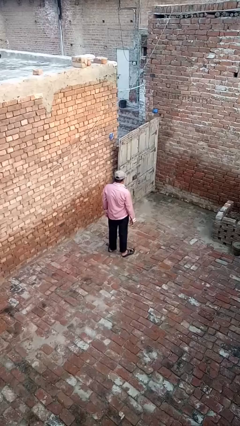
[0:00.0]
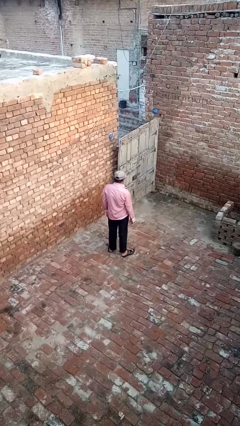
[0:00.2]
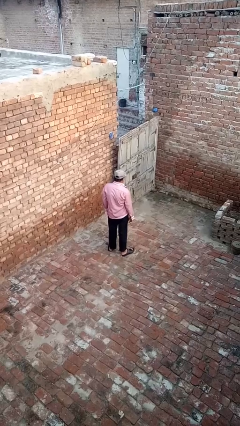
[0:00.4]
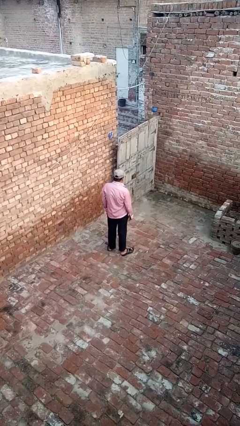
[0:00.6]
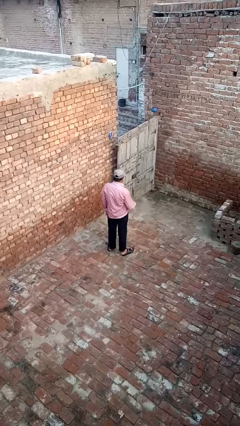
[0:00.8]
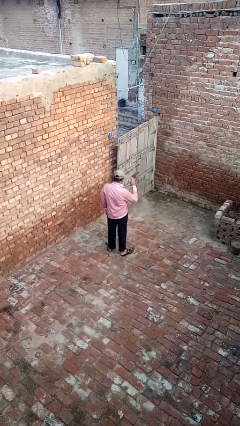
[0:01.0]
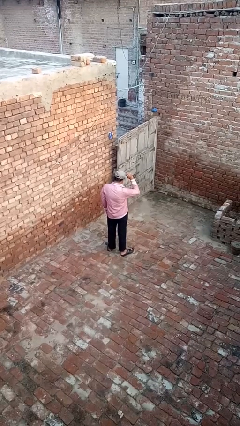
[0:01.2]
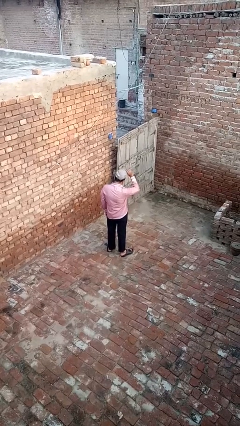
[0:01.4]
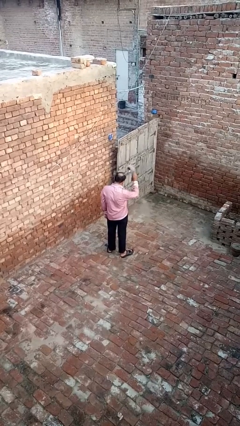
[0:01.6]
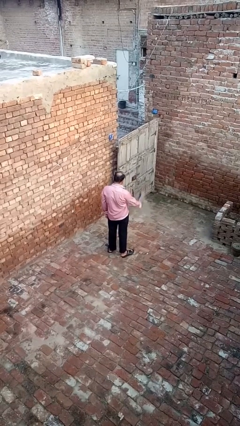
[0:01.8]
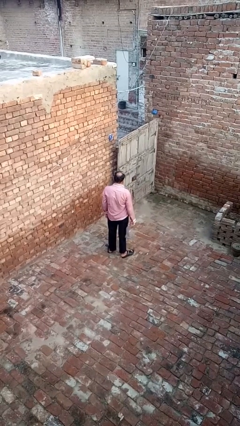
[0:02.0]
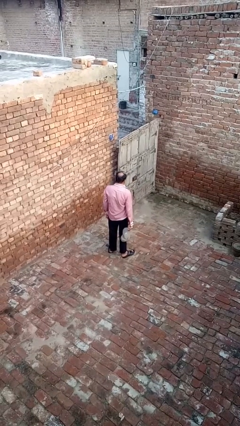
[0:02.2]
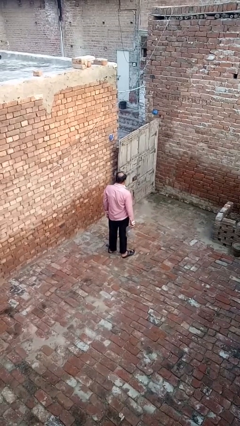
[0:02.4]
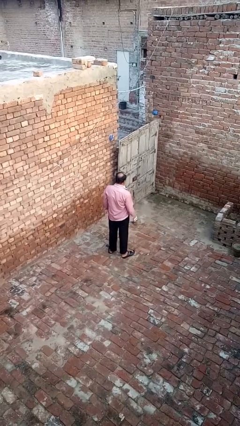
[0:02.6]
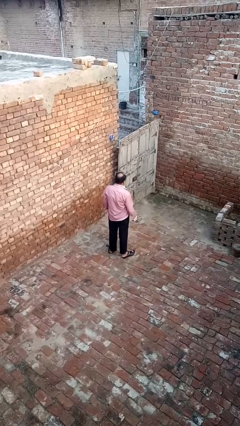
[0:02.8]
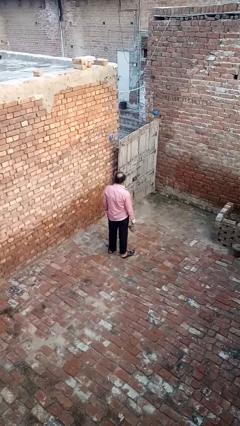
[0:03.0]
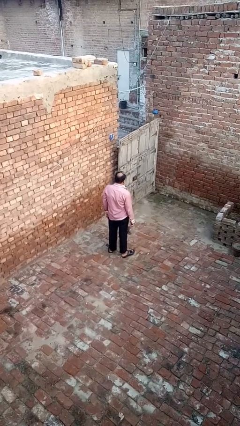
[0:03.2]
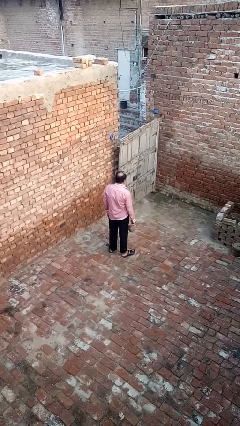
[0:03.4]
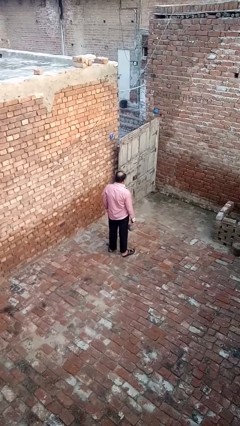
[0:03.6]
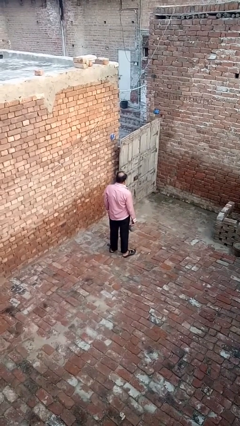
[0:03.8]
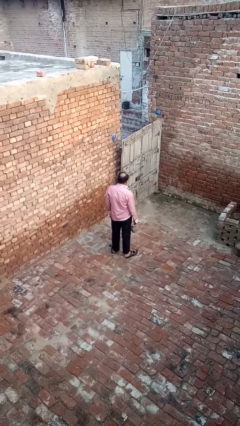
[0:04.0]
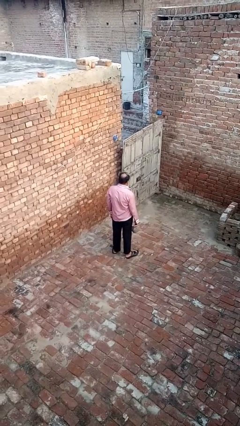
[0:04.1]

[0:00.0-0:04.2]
person takes off hat

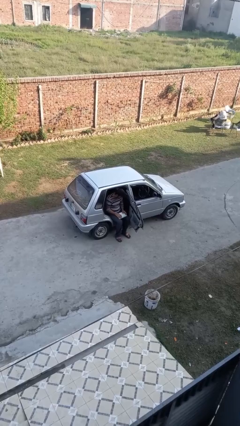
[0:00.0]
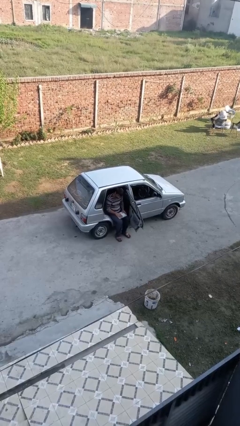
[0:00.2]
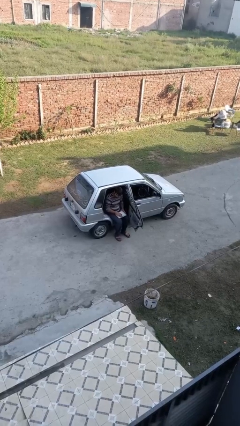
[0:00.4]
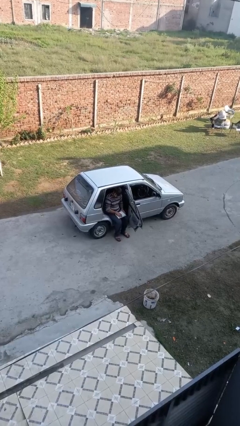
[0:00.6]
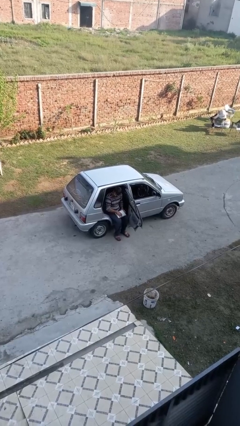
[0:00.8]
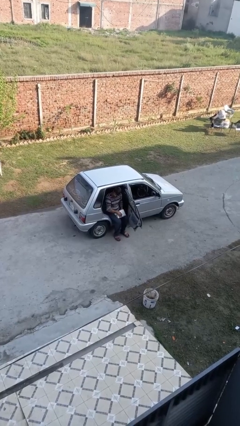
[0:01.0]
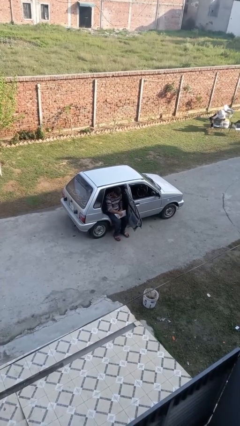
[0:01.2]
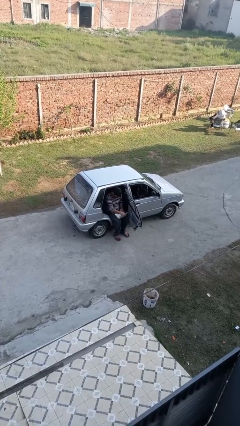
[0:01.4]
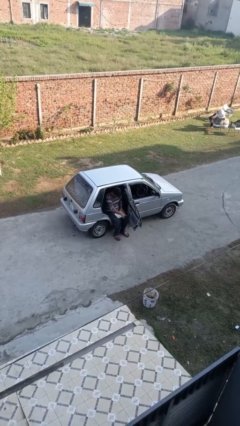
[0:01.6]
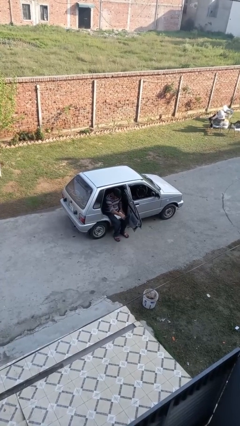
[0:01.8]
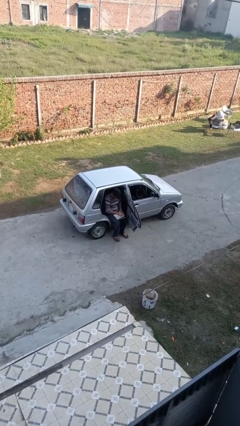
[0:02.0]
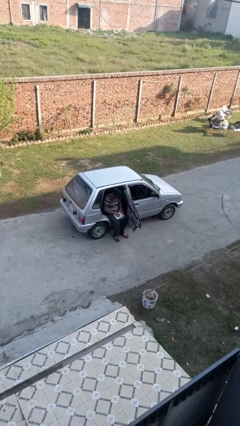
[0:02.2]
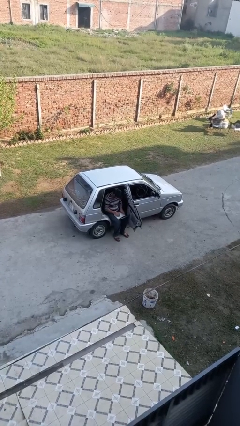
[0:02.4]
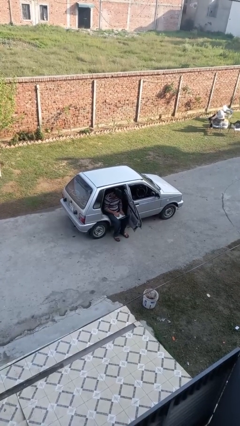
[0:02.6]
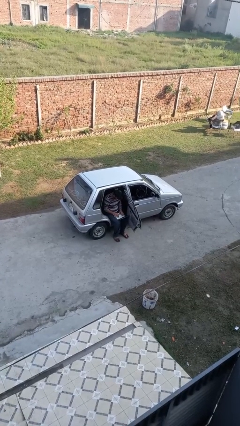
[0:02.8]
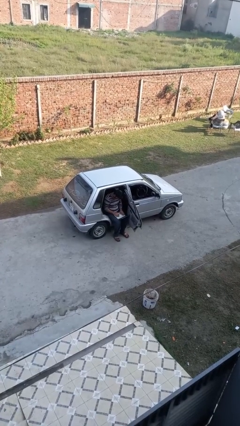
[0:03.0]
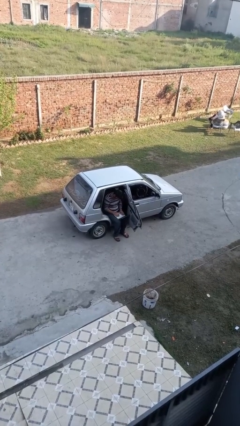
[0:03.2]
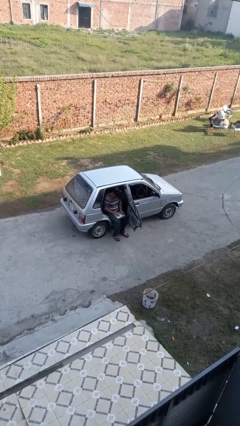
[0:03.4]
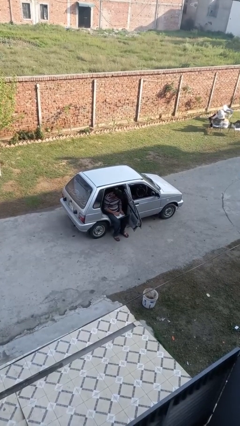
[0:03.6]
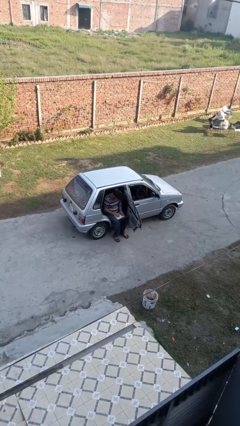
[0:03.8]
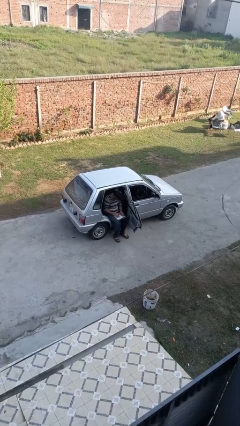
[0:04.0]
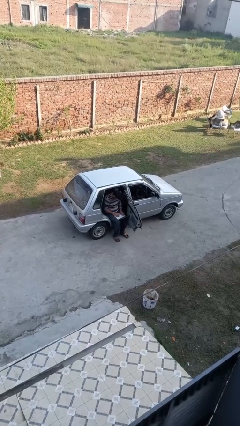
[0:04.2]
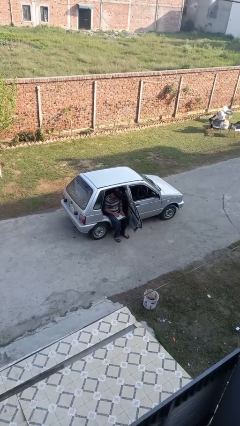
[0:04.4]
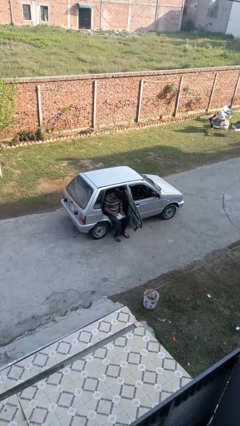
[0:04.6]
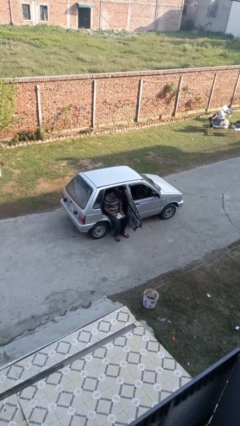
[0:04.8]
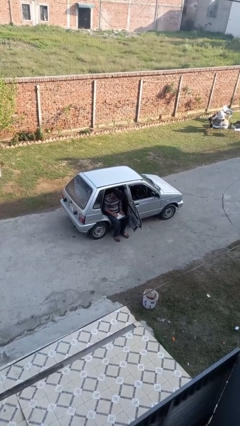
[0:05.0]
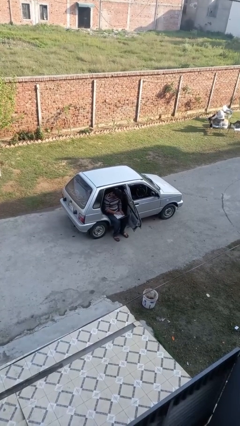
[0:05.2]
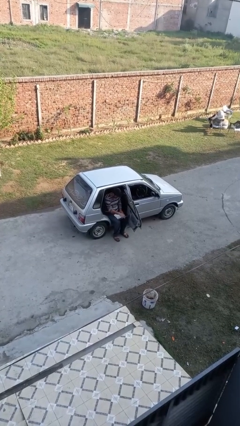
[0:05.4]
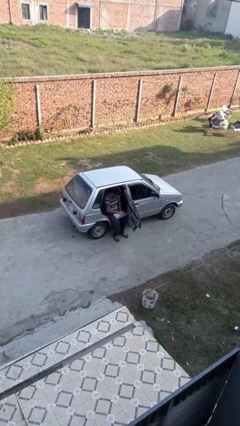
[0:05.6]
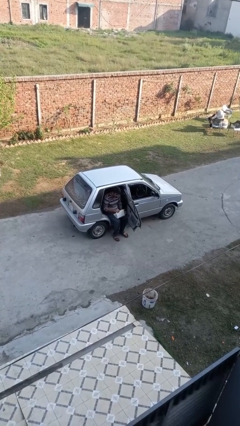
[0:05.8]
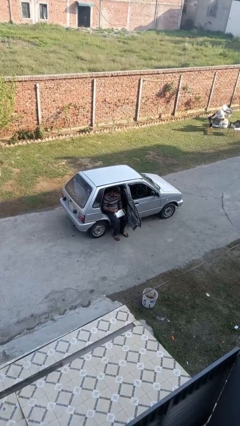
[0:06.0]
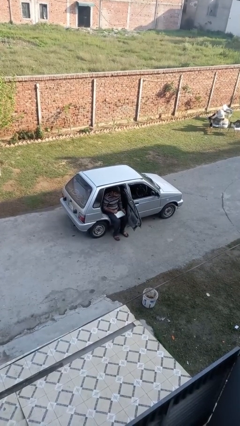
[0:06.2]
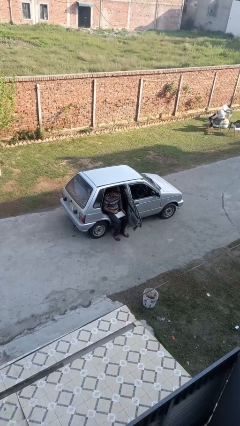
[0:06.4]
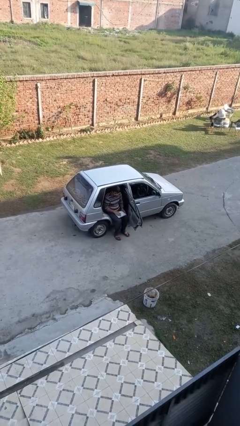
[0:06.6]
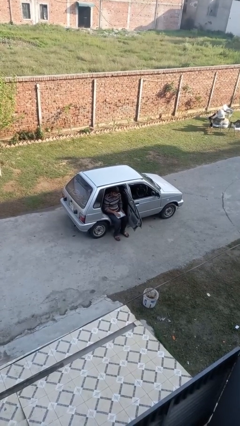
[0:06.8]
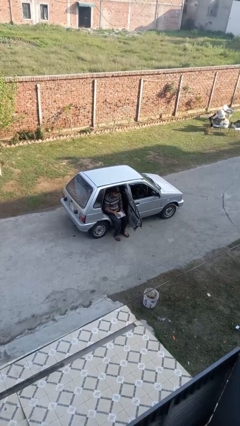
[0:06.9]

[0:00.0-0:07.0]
person interacts with laptop

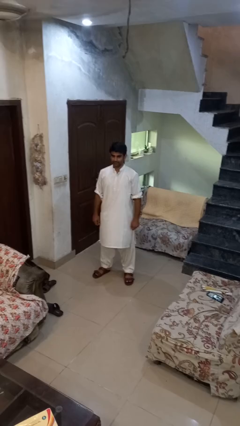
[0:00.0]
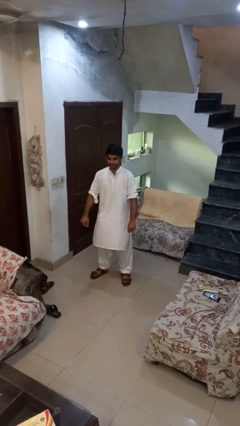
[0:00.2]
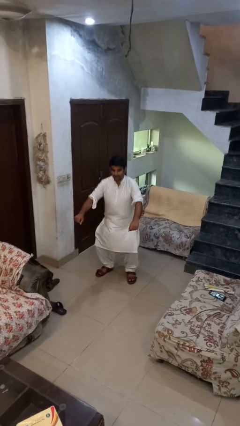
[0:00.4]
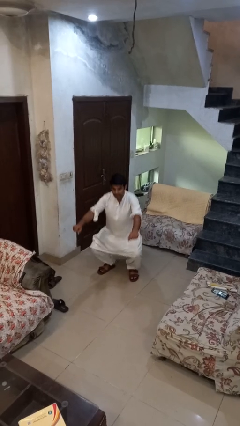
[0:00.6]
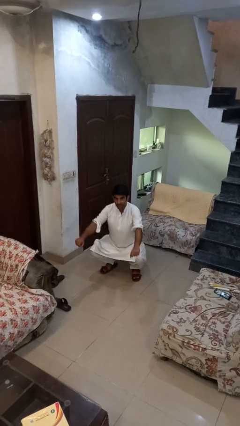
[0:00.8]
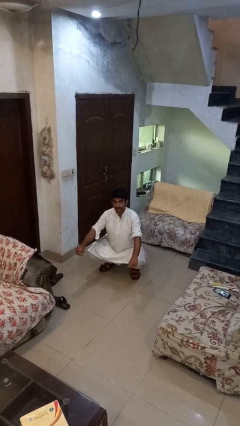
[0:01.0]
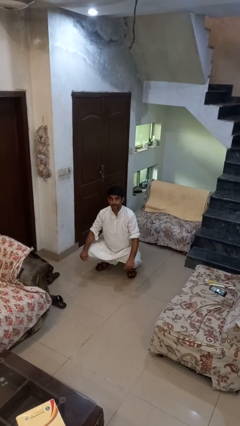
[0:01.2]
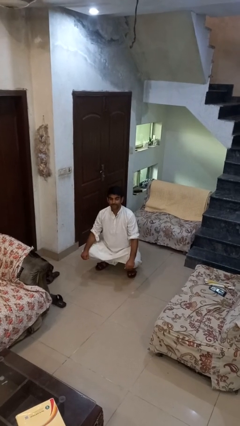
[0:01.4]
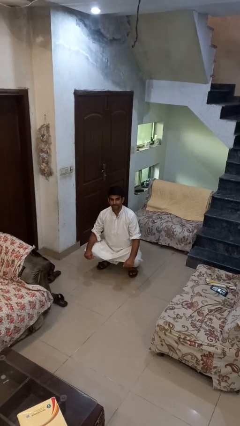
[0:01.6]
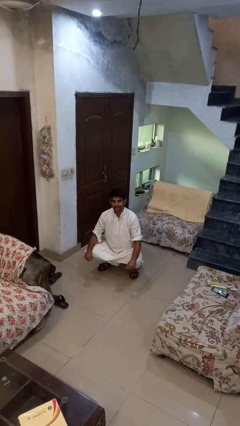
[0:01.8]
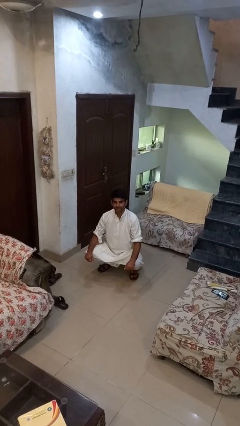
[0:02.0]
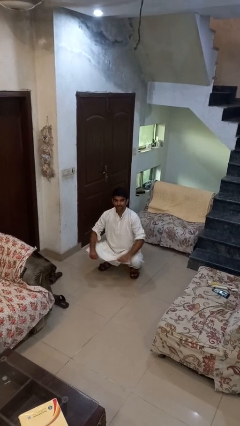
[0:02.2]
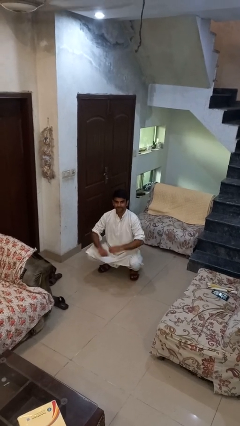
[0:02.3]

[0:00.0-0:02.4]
person squats

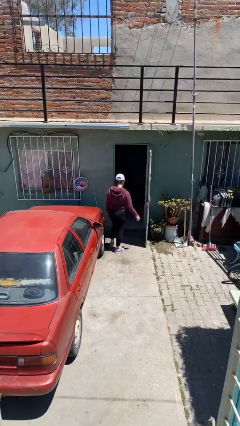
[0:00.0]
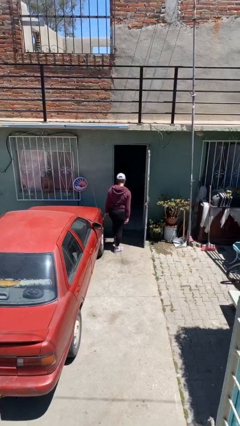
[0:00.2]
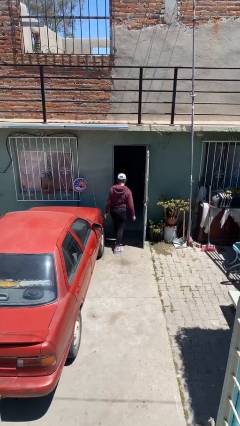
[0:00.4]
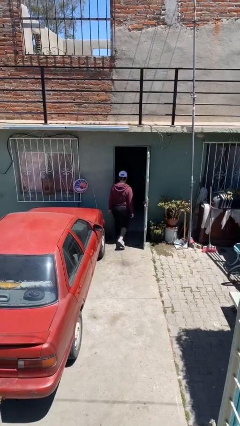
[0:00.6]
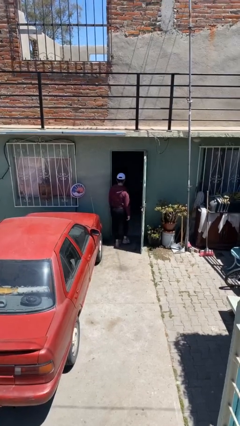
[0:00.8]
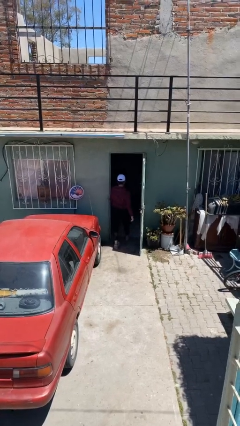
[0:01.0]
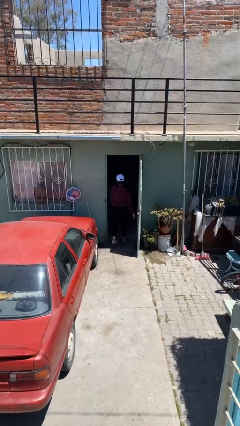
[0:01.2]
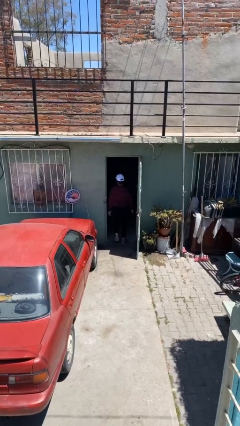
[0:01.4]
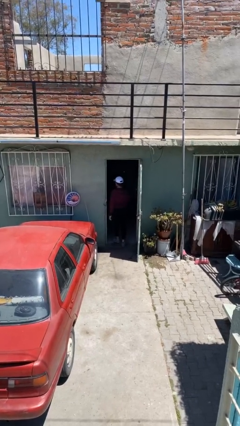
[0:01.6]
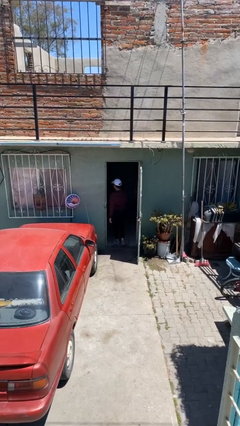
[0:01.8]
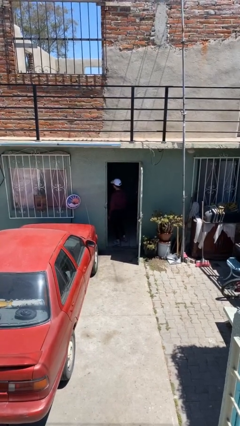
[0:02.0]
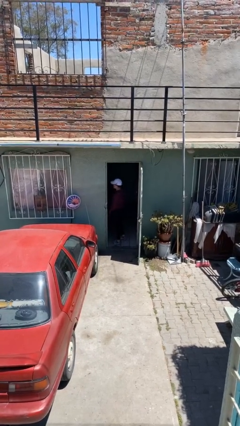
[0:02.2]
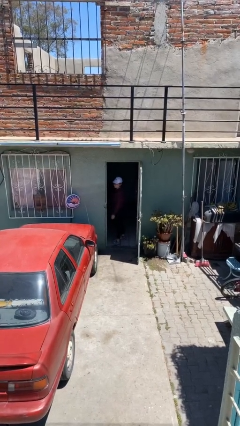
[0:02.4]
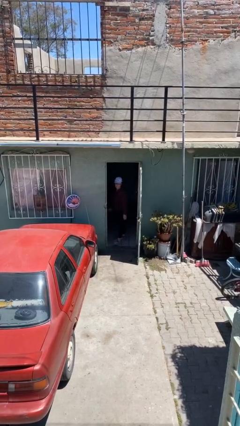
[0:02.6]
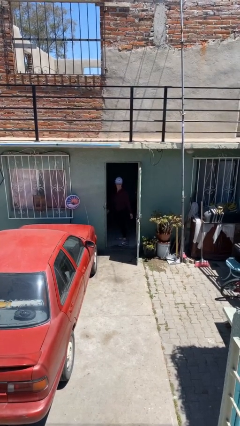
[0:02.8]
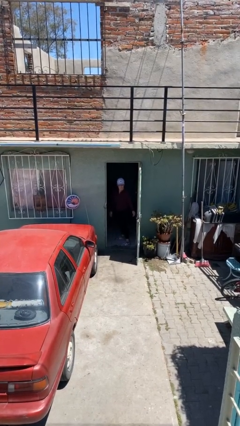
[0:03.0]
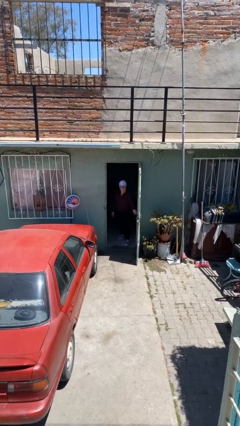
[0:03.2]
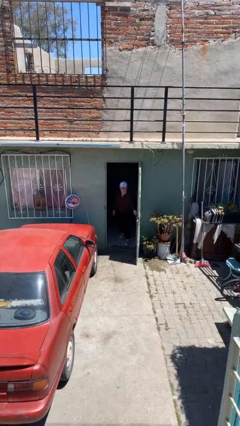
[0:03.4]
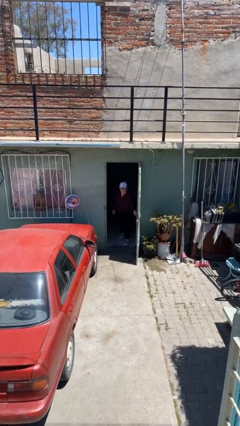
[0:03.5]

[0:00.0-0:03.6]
person exits scene through structure

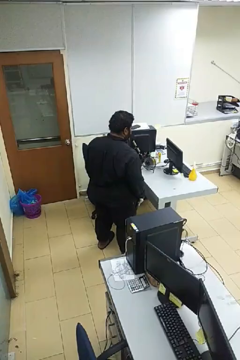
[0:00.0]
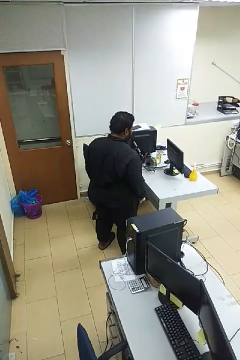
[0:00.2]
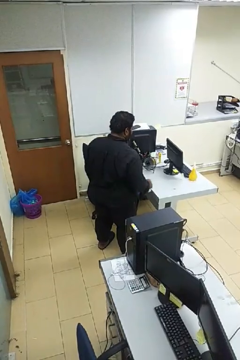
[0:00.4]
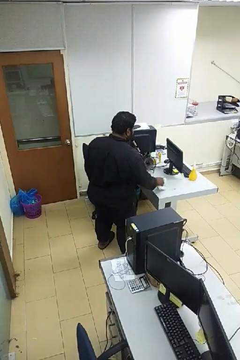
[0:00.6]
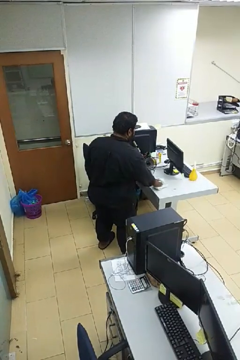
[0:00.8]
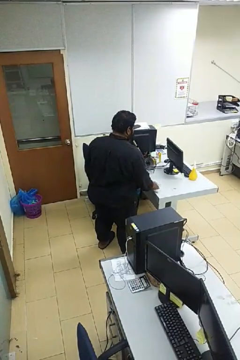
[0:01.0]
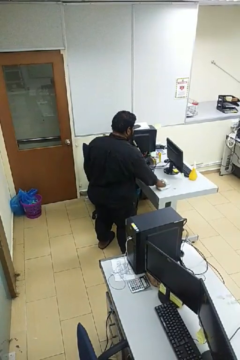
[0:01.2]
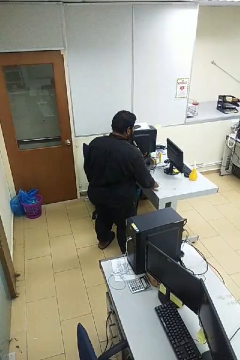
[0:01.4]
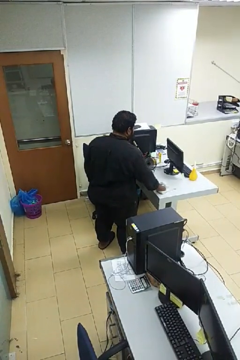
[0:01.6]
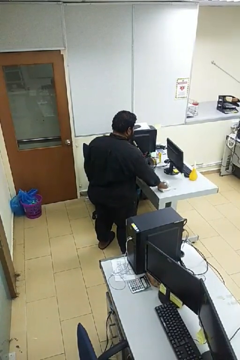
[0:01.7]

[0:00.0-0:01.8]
person cleans table with rag
